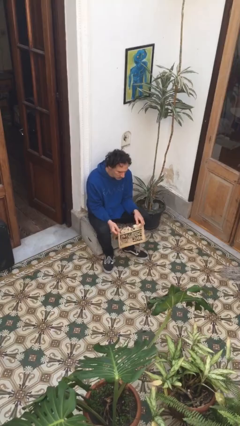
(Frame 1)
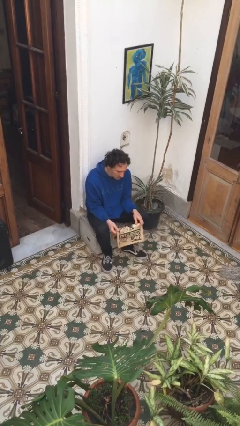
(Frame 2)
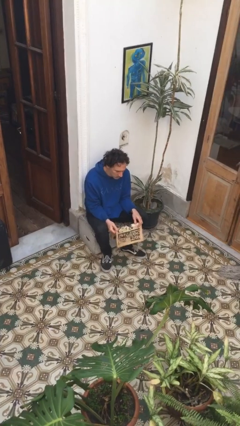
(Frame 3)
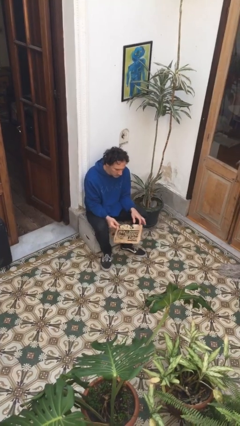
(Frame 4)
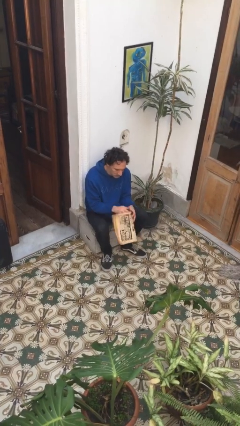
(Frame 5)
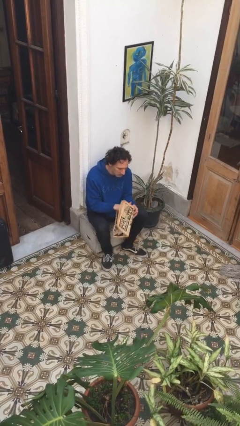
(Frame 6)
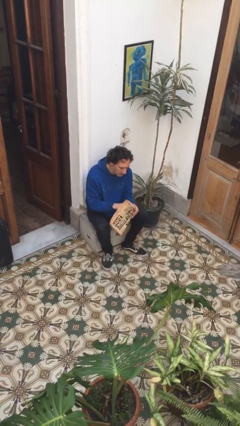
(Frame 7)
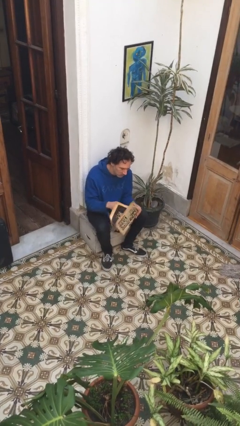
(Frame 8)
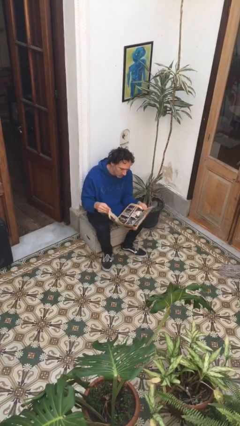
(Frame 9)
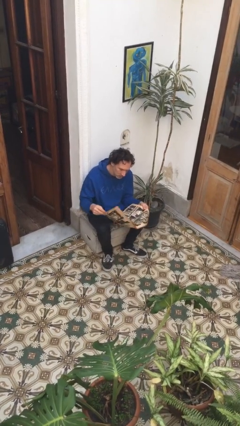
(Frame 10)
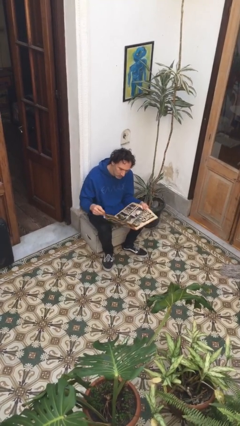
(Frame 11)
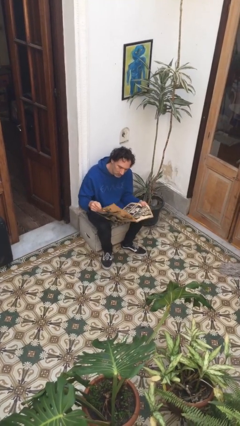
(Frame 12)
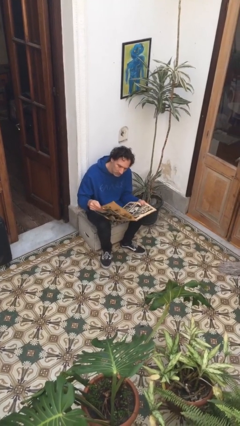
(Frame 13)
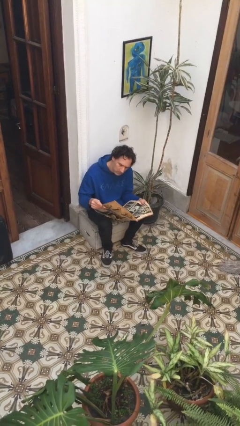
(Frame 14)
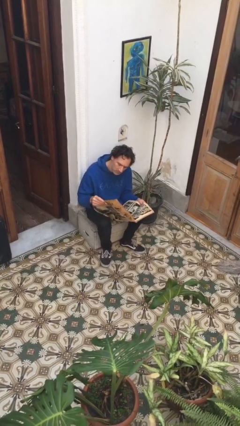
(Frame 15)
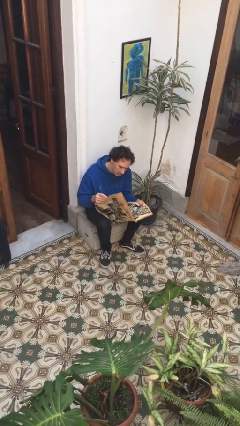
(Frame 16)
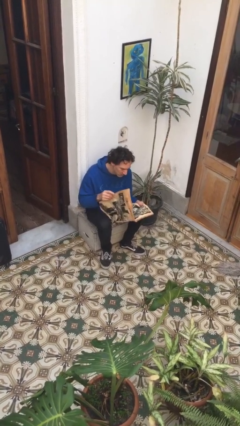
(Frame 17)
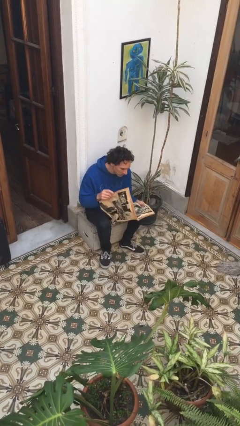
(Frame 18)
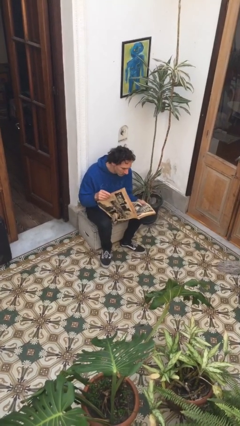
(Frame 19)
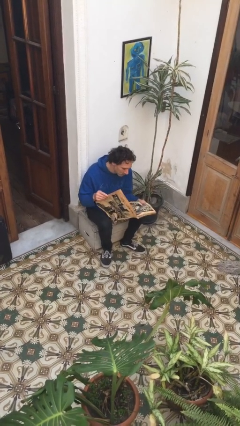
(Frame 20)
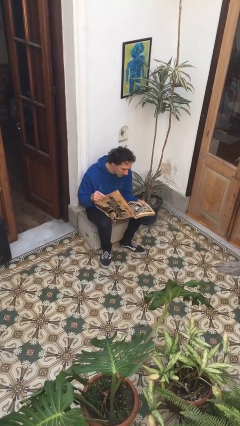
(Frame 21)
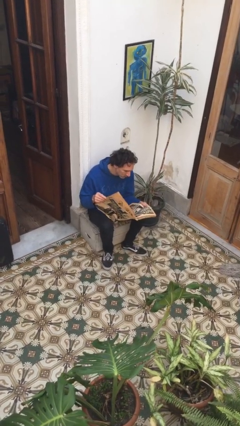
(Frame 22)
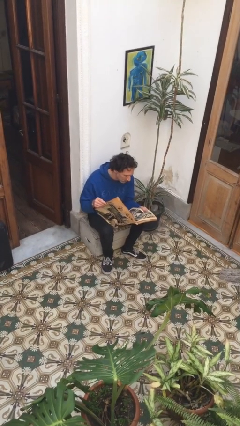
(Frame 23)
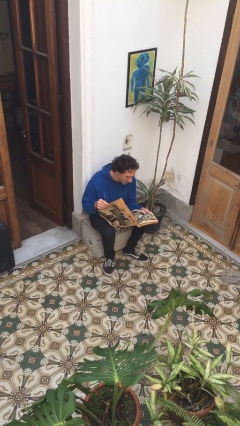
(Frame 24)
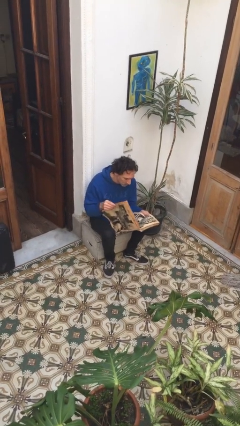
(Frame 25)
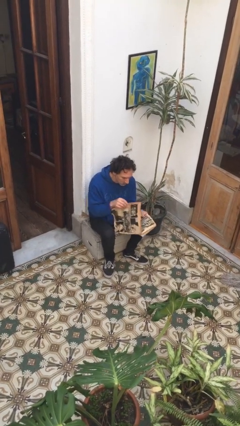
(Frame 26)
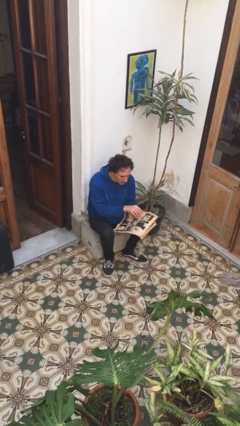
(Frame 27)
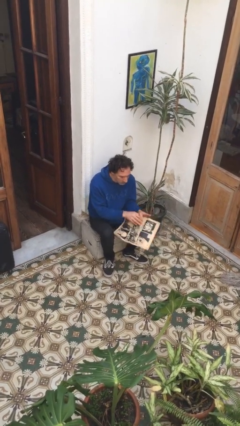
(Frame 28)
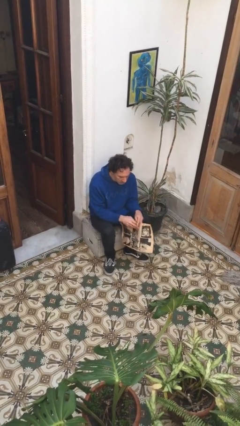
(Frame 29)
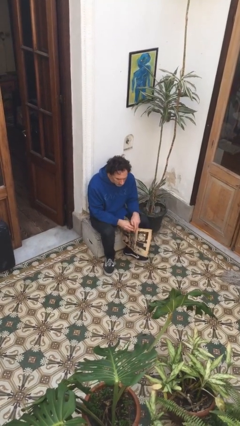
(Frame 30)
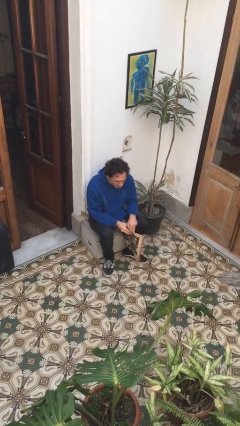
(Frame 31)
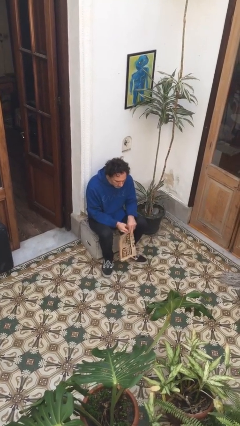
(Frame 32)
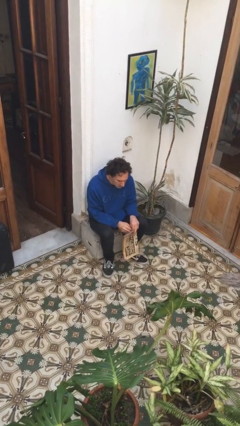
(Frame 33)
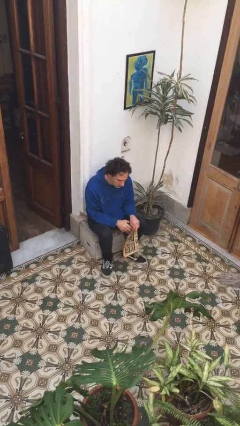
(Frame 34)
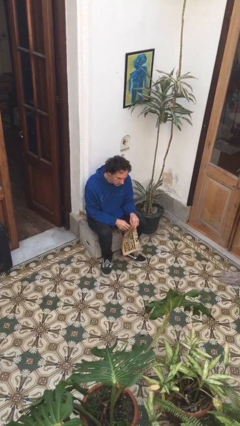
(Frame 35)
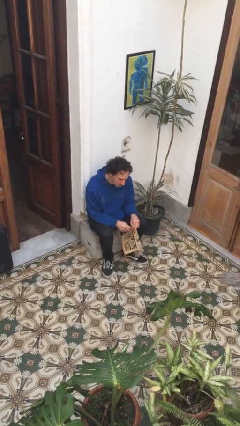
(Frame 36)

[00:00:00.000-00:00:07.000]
person reads newspaper

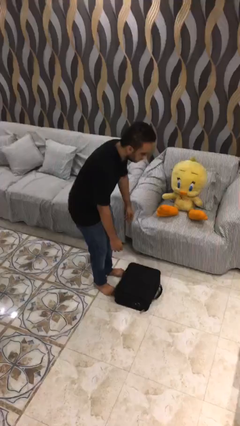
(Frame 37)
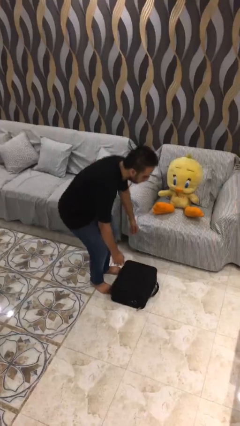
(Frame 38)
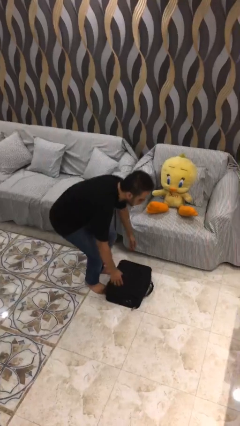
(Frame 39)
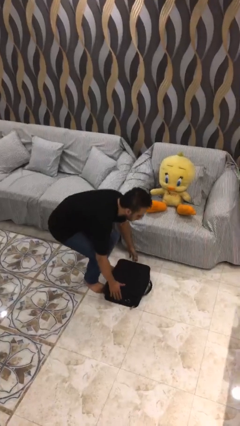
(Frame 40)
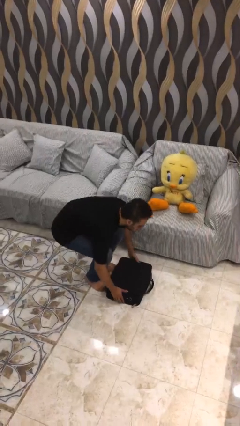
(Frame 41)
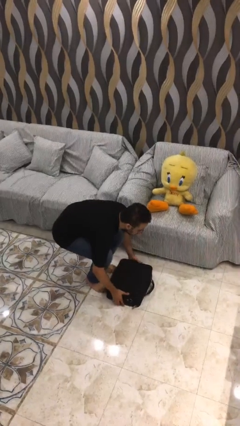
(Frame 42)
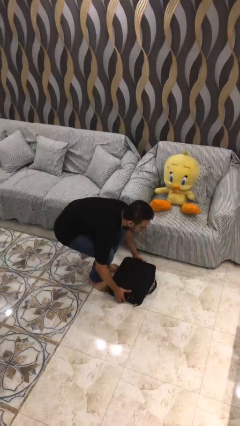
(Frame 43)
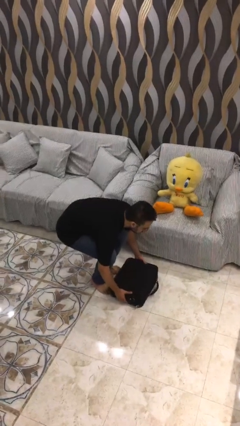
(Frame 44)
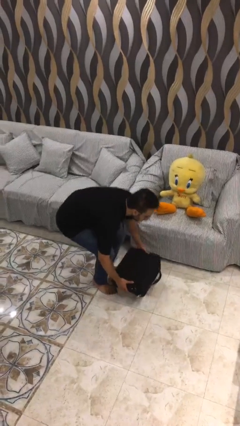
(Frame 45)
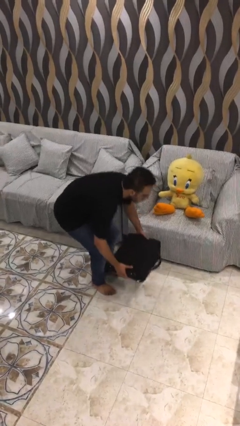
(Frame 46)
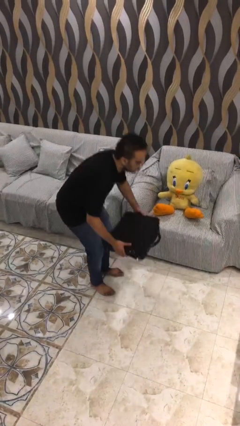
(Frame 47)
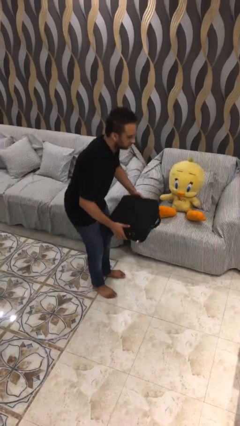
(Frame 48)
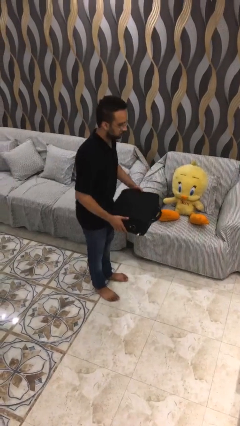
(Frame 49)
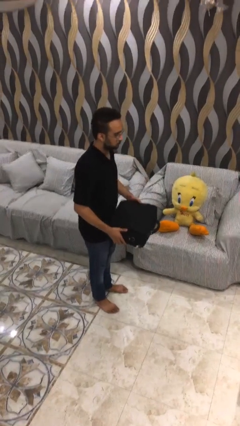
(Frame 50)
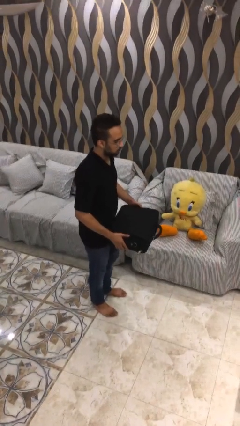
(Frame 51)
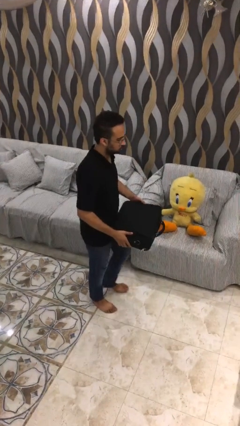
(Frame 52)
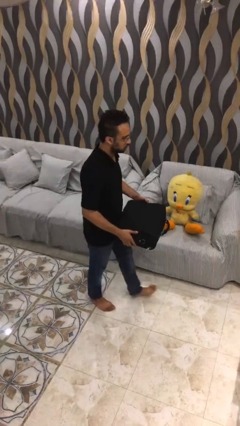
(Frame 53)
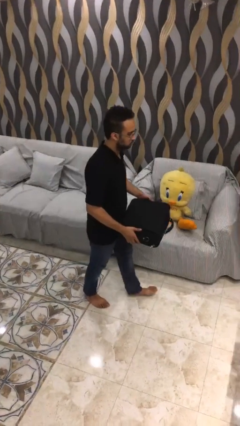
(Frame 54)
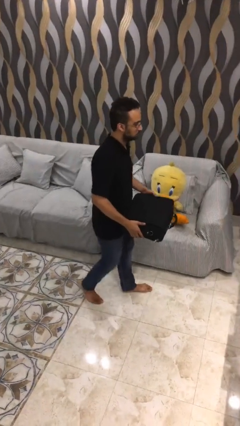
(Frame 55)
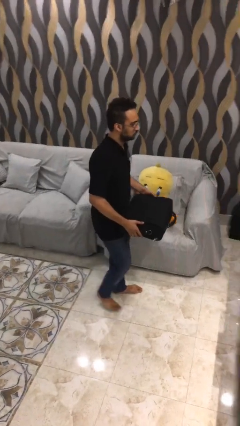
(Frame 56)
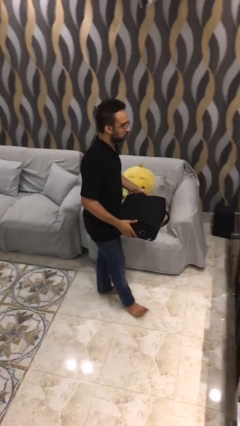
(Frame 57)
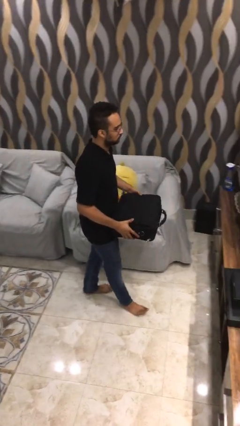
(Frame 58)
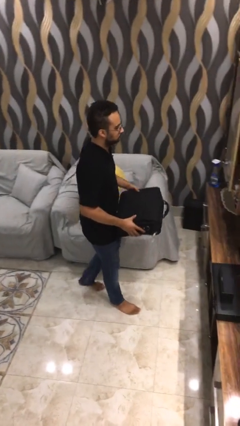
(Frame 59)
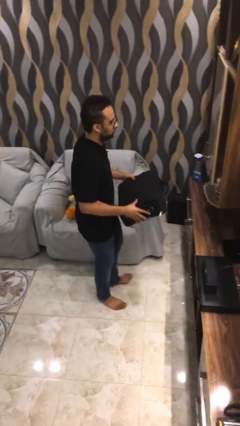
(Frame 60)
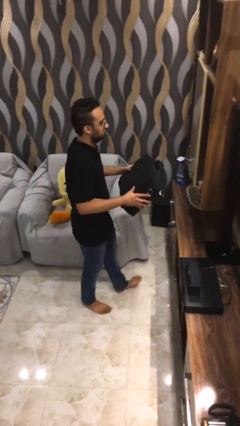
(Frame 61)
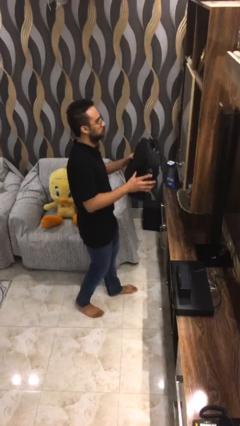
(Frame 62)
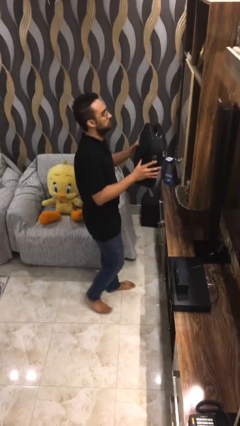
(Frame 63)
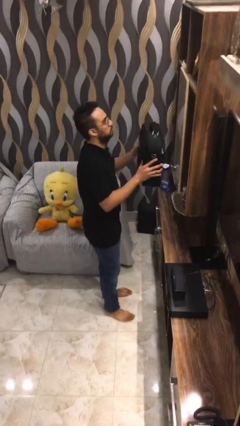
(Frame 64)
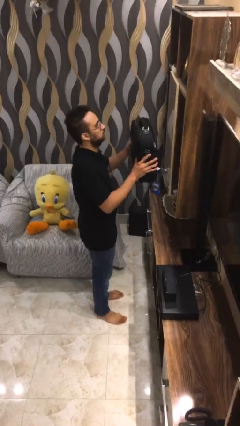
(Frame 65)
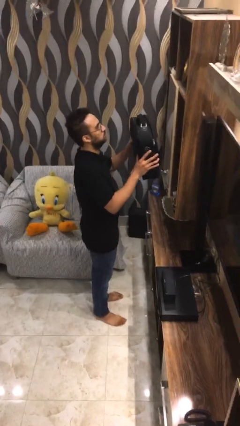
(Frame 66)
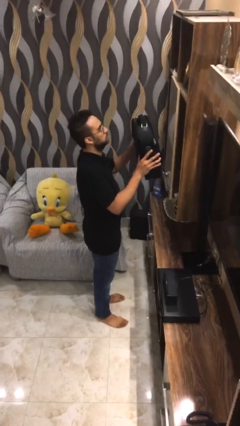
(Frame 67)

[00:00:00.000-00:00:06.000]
person picks up object from floor

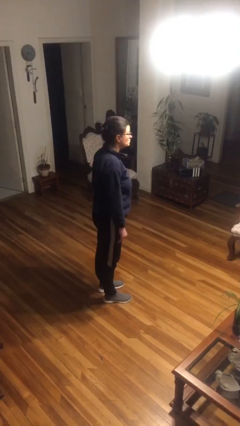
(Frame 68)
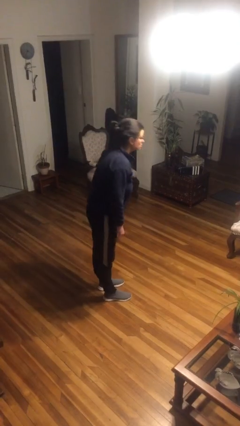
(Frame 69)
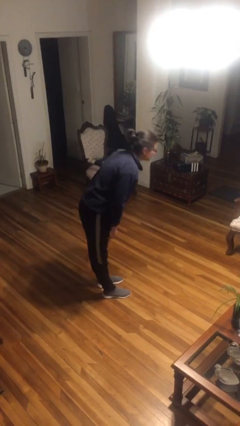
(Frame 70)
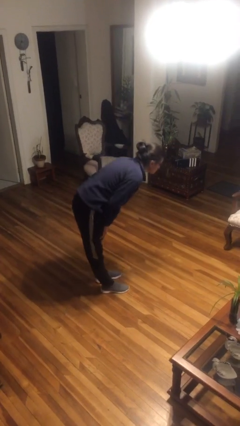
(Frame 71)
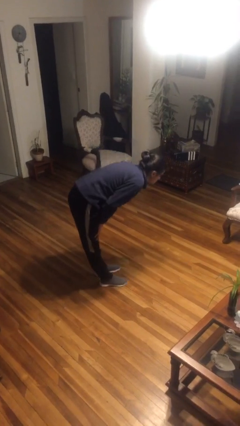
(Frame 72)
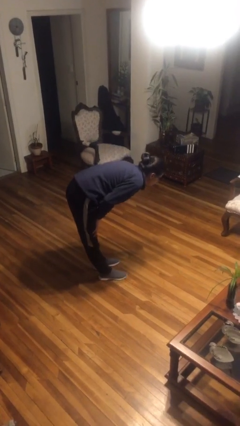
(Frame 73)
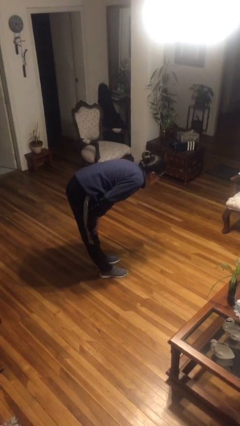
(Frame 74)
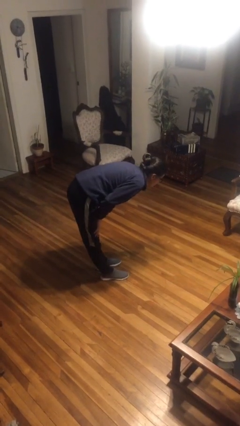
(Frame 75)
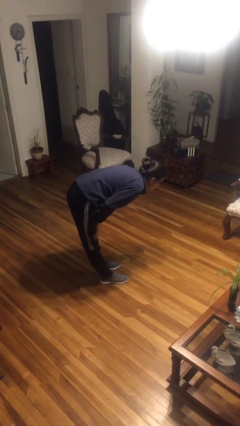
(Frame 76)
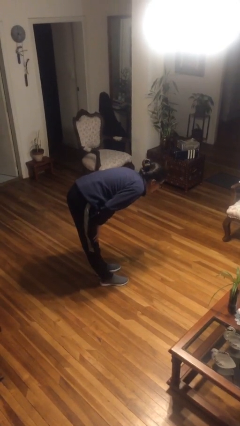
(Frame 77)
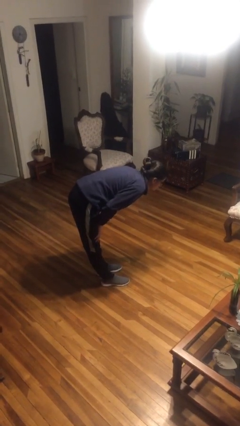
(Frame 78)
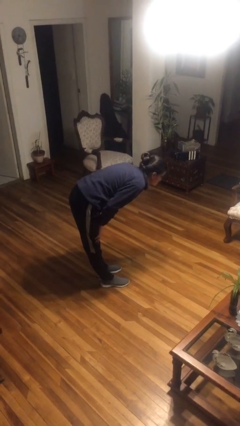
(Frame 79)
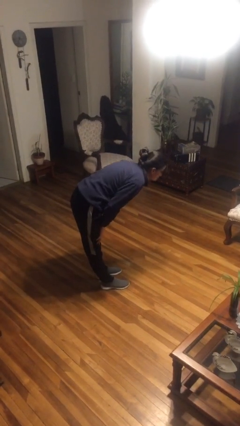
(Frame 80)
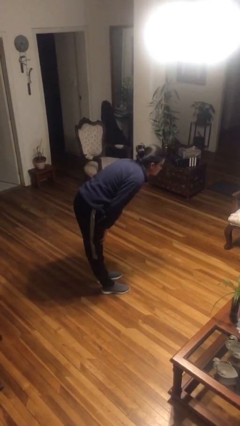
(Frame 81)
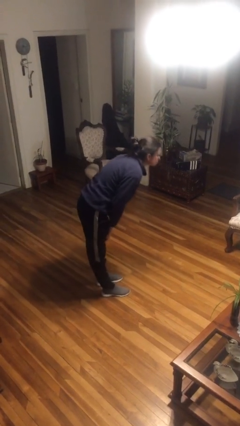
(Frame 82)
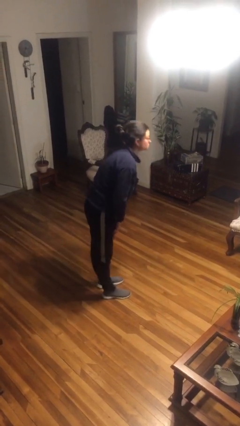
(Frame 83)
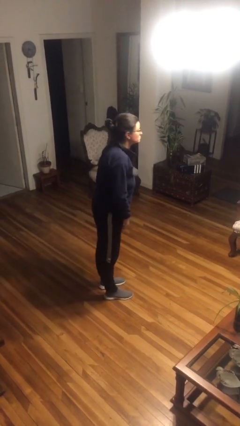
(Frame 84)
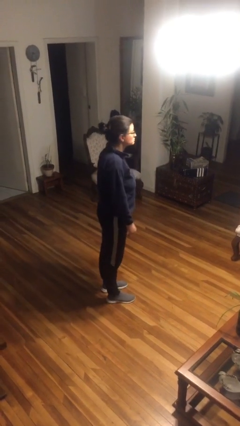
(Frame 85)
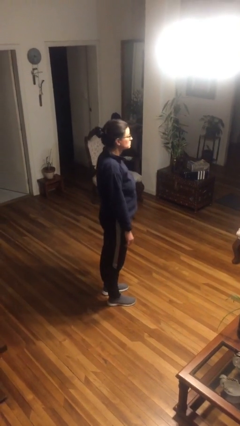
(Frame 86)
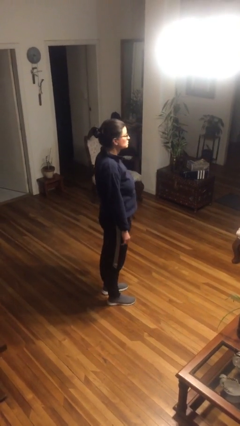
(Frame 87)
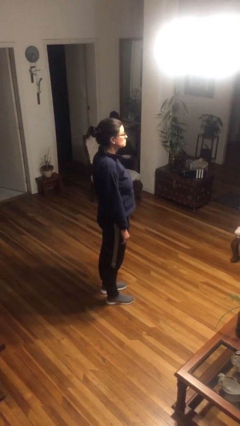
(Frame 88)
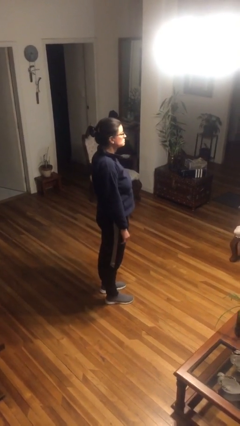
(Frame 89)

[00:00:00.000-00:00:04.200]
person bows

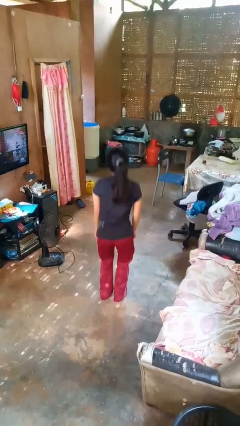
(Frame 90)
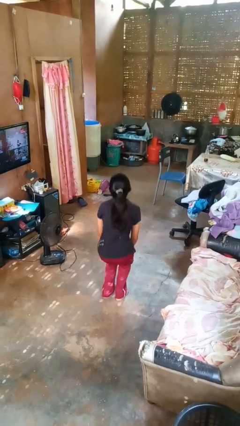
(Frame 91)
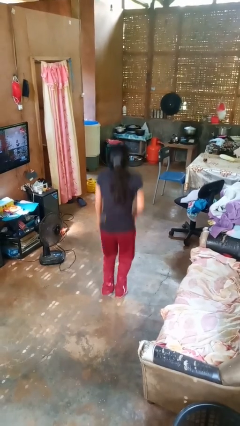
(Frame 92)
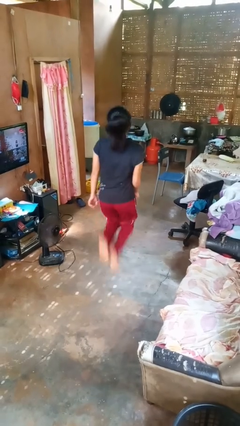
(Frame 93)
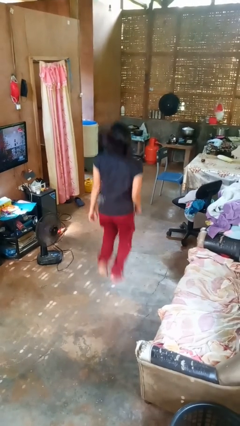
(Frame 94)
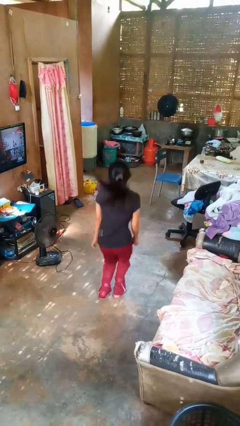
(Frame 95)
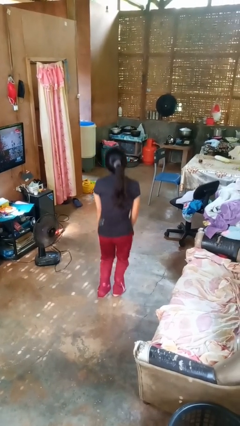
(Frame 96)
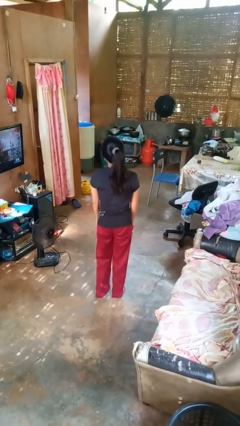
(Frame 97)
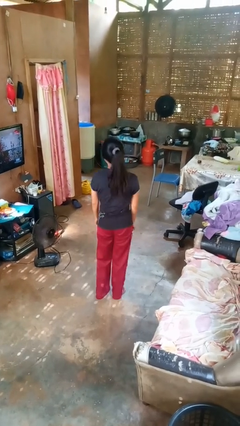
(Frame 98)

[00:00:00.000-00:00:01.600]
person jumps
